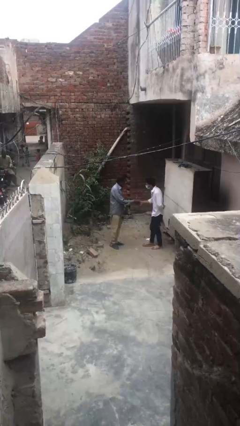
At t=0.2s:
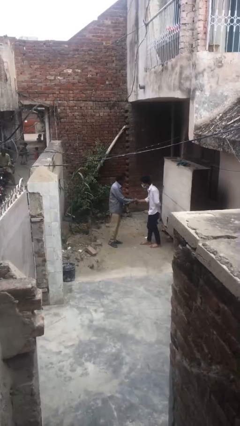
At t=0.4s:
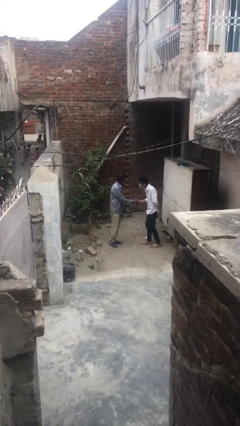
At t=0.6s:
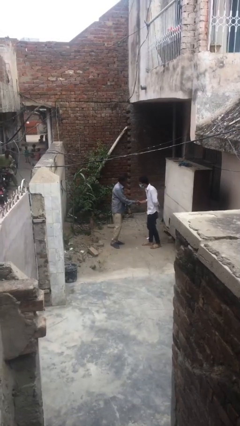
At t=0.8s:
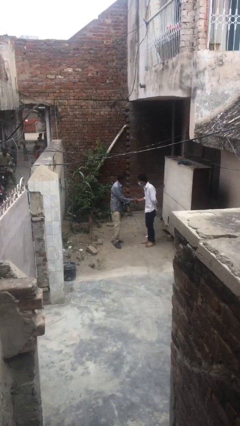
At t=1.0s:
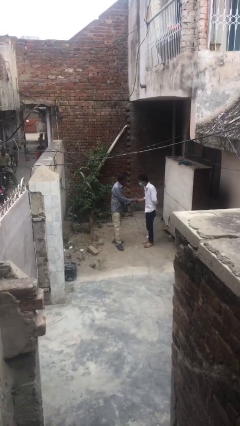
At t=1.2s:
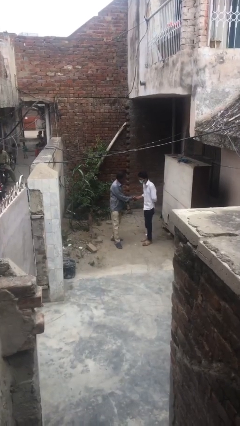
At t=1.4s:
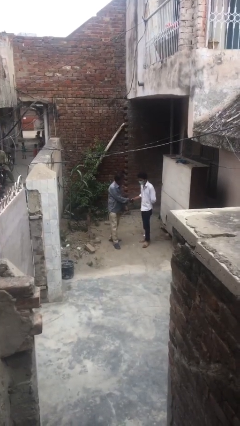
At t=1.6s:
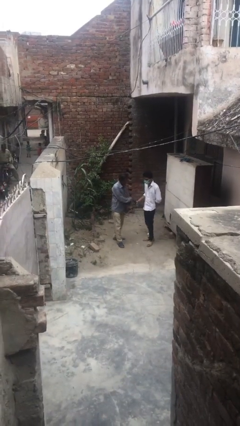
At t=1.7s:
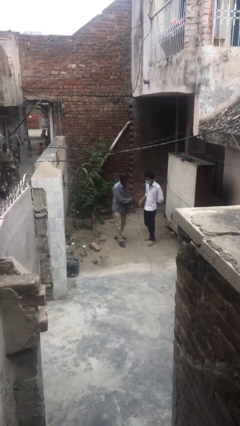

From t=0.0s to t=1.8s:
person shakes hand

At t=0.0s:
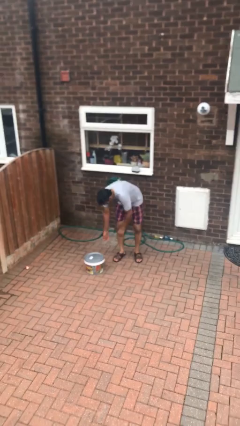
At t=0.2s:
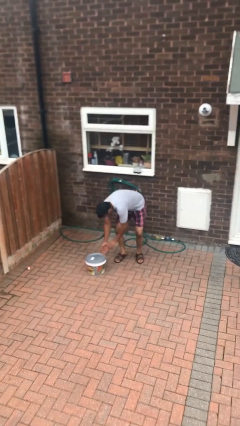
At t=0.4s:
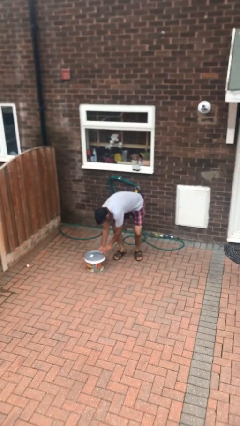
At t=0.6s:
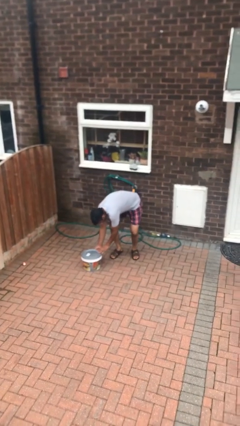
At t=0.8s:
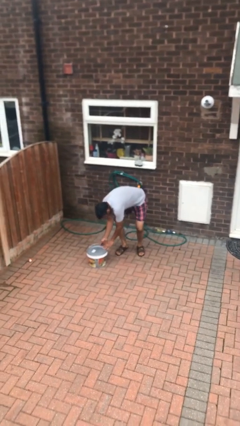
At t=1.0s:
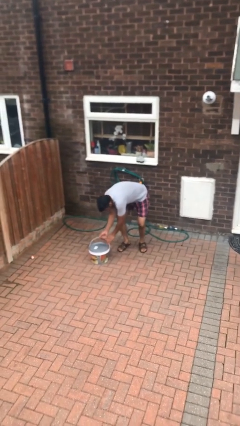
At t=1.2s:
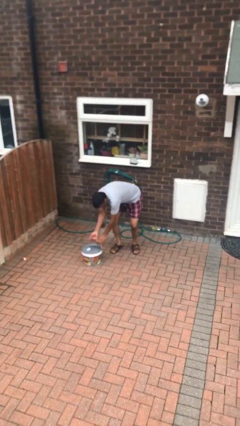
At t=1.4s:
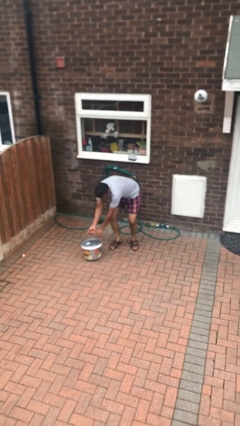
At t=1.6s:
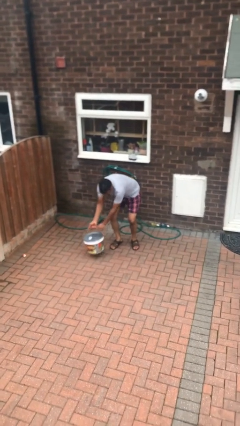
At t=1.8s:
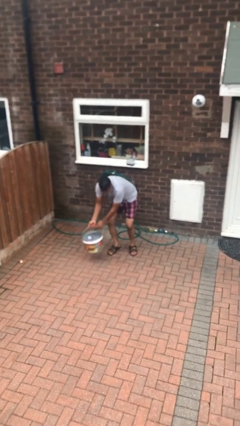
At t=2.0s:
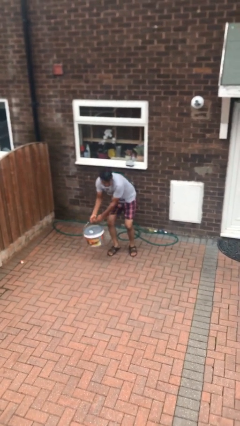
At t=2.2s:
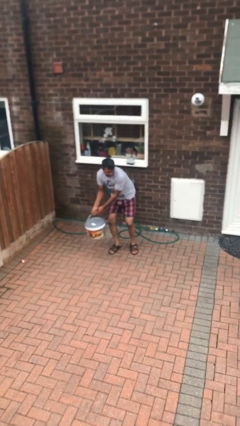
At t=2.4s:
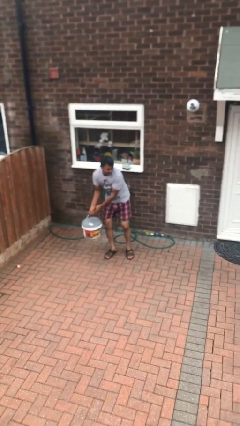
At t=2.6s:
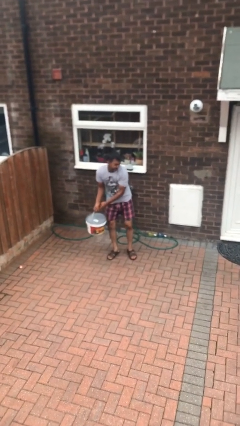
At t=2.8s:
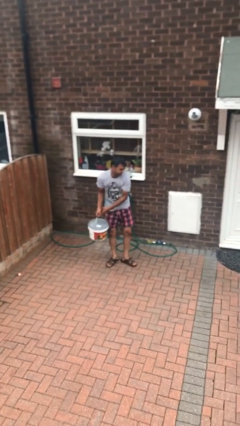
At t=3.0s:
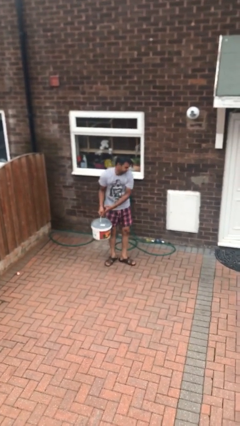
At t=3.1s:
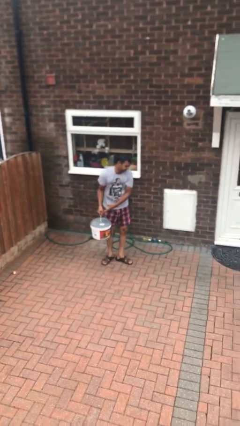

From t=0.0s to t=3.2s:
person picks up object from floor

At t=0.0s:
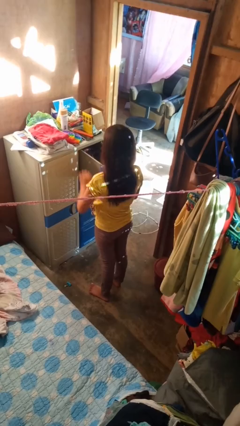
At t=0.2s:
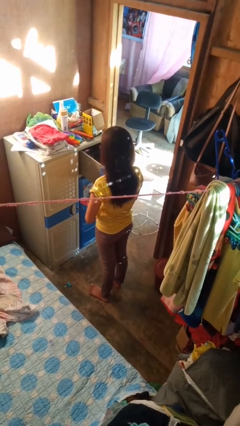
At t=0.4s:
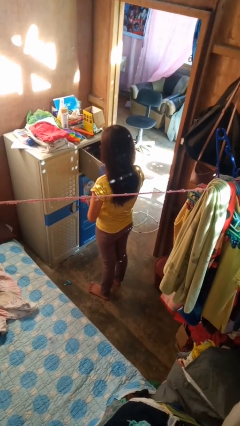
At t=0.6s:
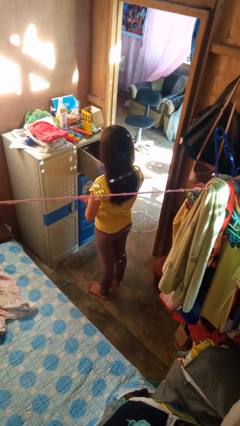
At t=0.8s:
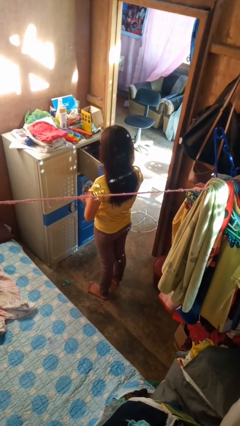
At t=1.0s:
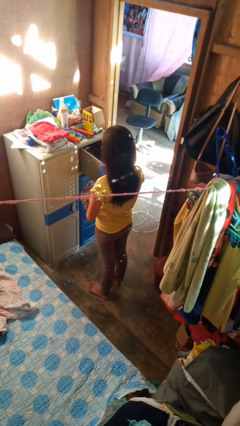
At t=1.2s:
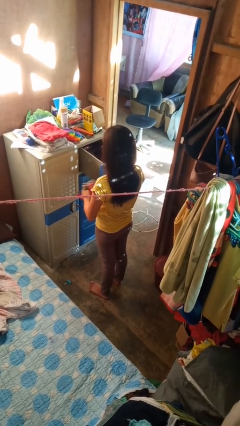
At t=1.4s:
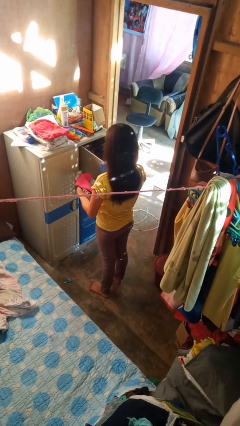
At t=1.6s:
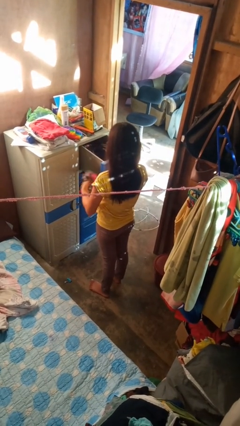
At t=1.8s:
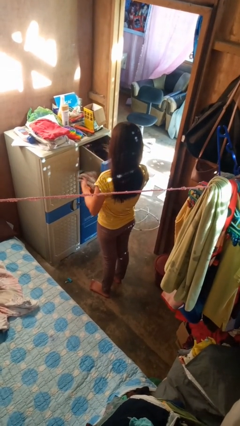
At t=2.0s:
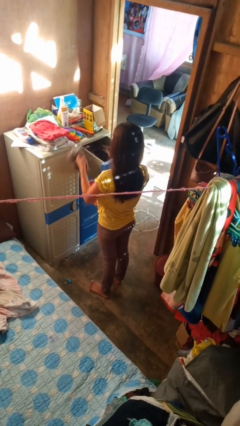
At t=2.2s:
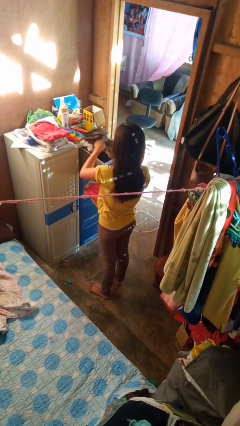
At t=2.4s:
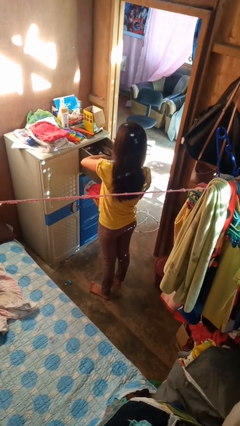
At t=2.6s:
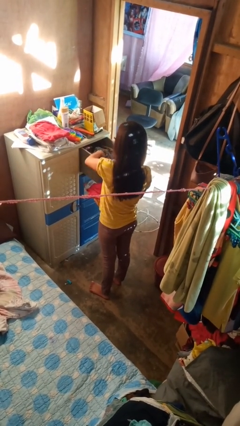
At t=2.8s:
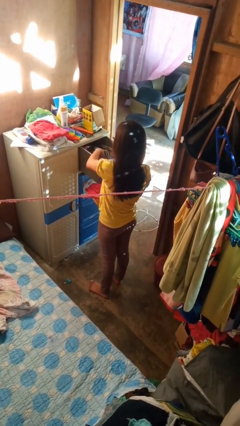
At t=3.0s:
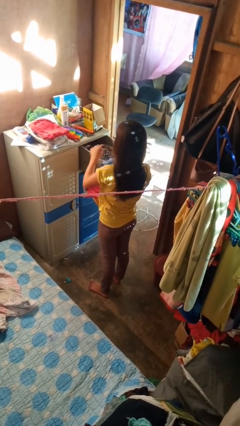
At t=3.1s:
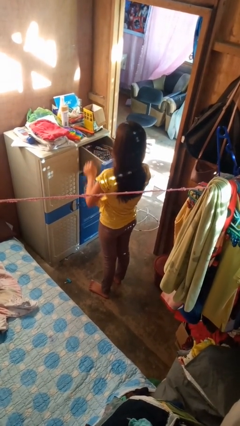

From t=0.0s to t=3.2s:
person puts clothes into dresser

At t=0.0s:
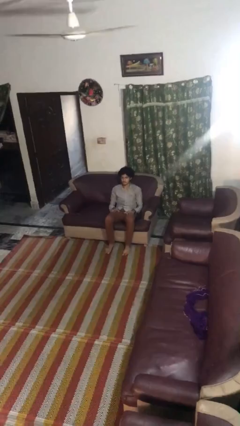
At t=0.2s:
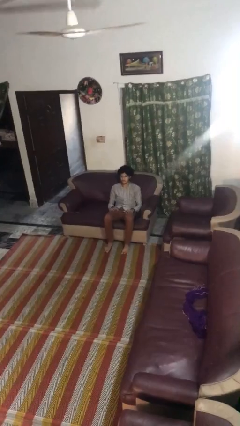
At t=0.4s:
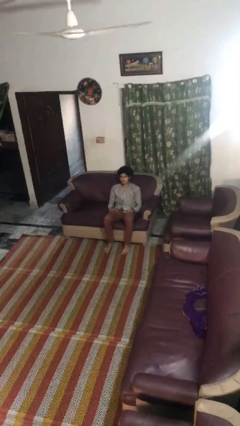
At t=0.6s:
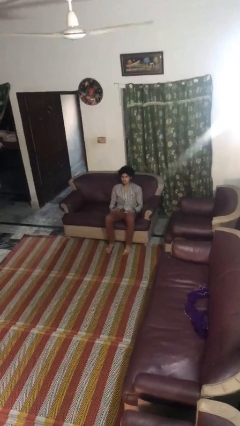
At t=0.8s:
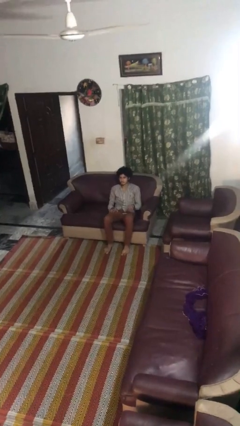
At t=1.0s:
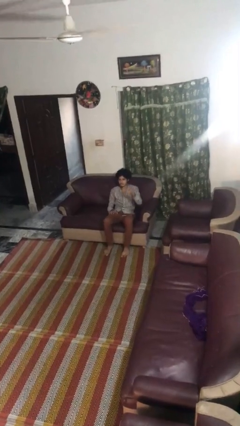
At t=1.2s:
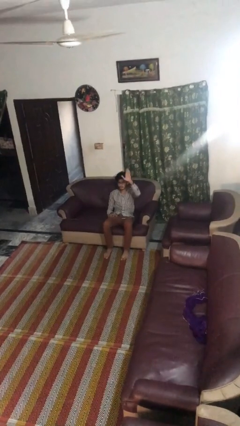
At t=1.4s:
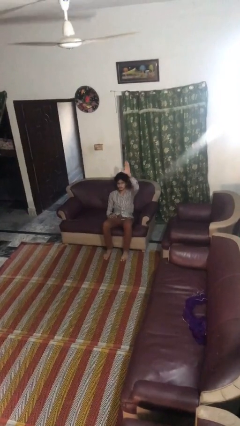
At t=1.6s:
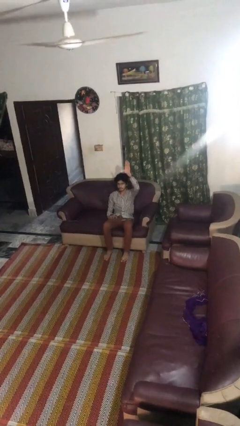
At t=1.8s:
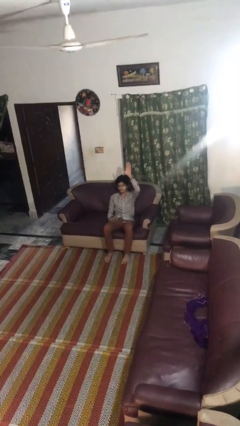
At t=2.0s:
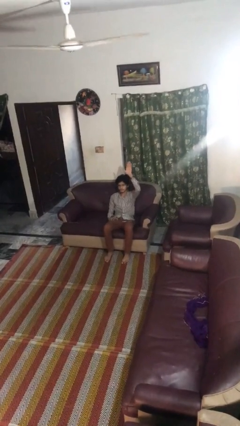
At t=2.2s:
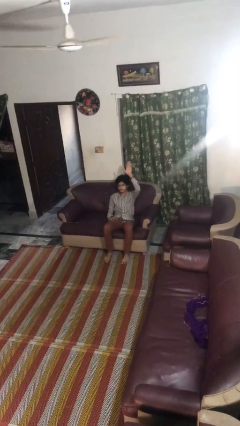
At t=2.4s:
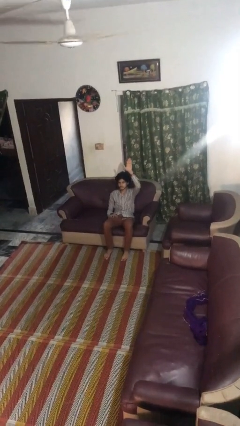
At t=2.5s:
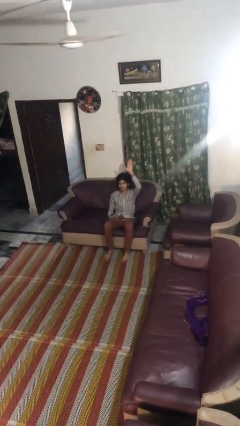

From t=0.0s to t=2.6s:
person gestures raise hand

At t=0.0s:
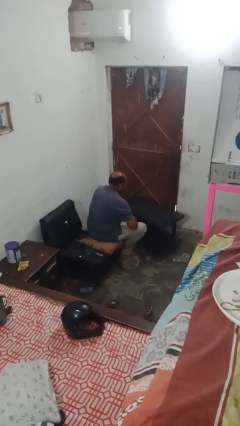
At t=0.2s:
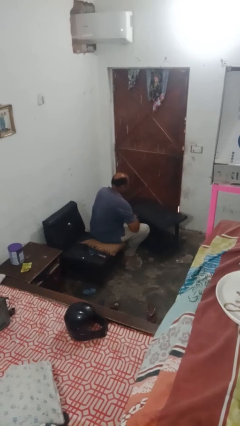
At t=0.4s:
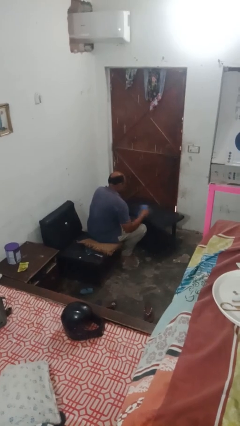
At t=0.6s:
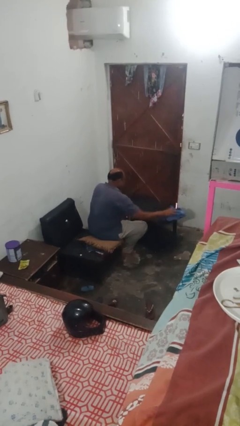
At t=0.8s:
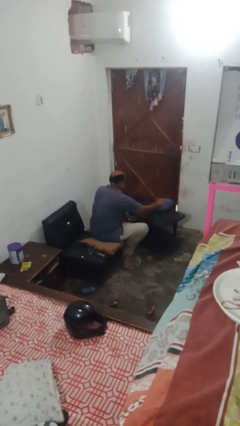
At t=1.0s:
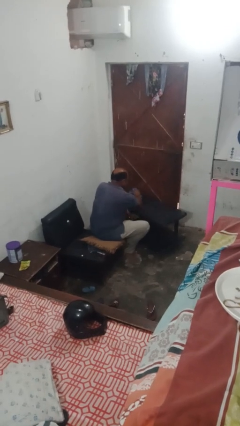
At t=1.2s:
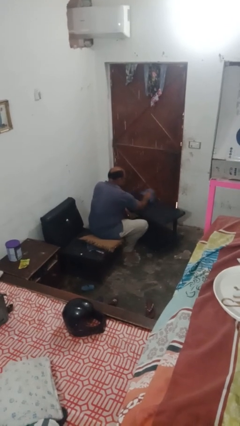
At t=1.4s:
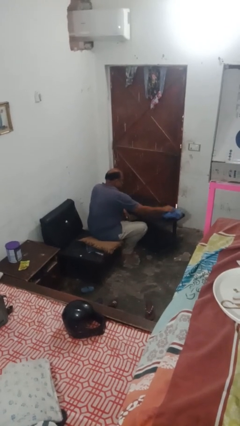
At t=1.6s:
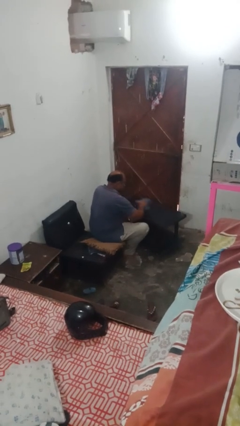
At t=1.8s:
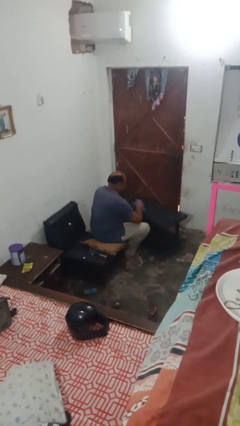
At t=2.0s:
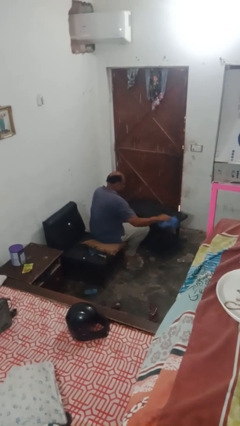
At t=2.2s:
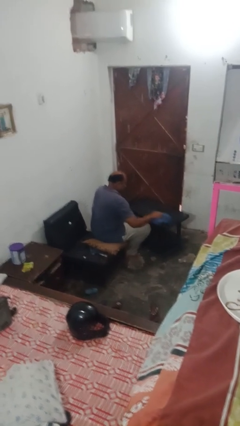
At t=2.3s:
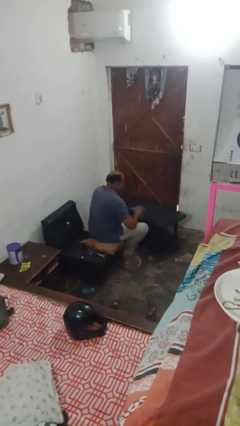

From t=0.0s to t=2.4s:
person cleans table with rag

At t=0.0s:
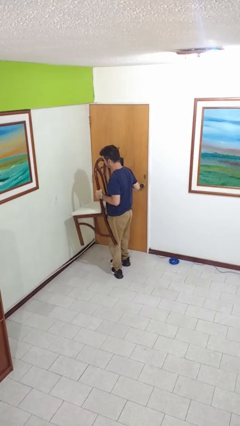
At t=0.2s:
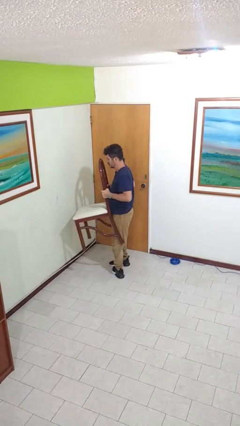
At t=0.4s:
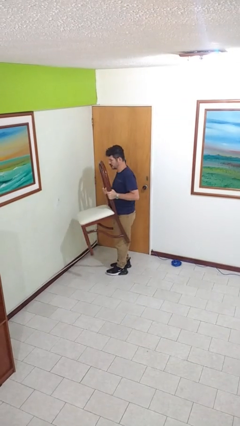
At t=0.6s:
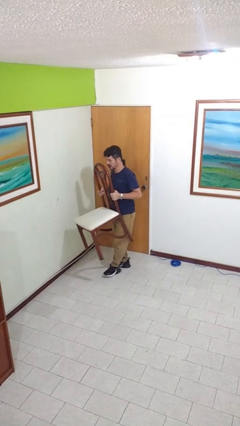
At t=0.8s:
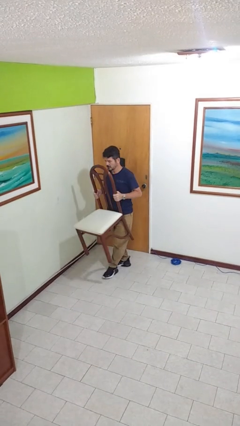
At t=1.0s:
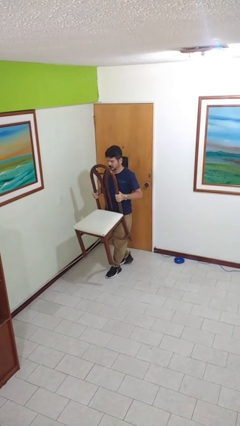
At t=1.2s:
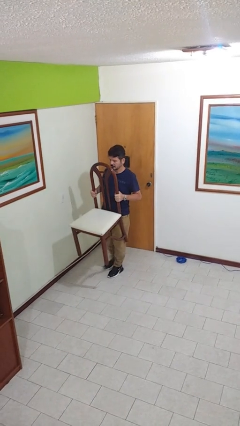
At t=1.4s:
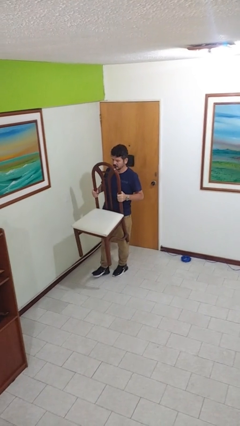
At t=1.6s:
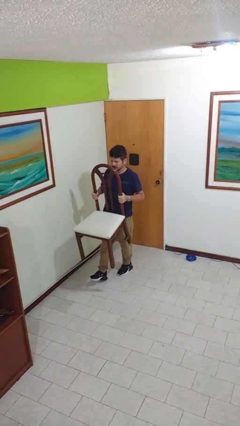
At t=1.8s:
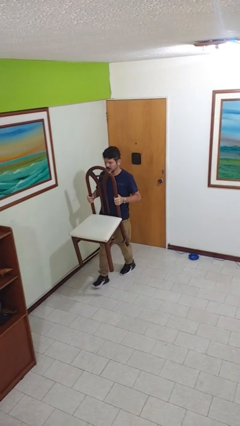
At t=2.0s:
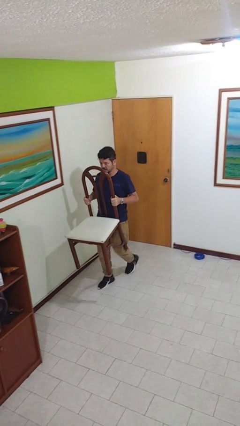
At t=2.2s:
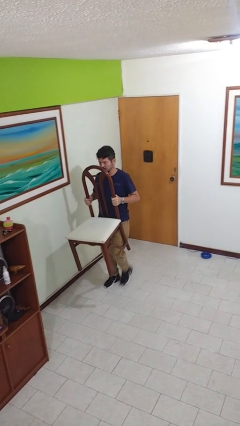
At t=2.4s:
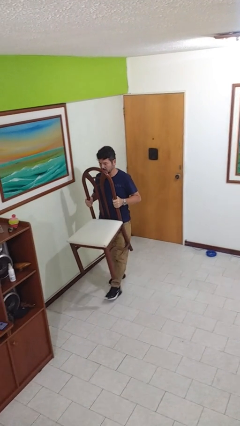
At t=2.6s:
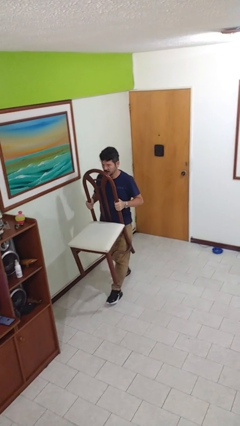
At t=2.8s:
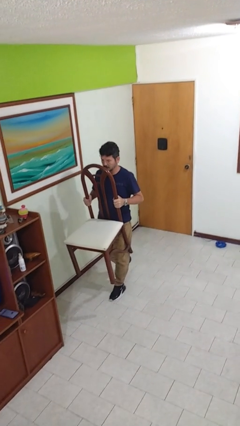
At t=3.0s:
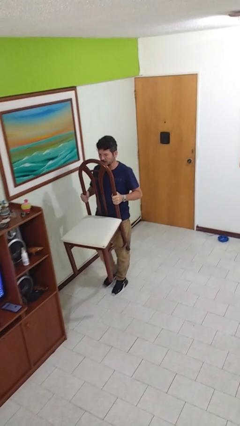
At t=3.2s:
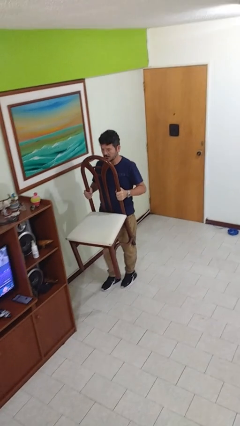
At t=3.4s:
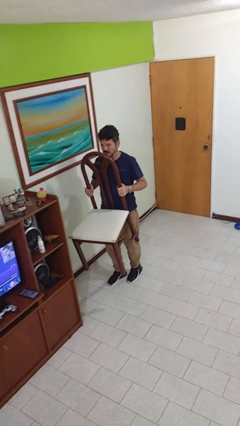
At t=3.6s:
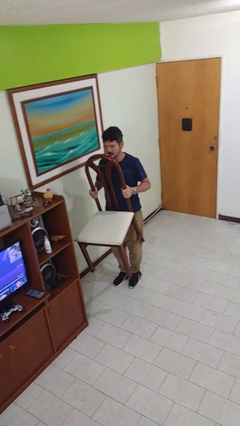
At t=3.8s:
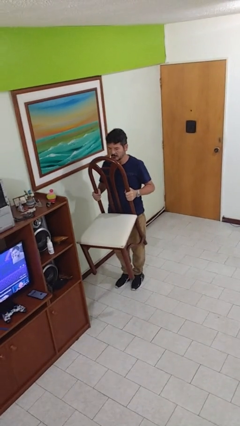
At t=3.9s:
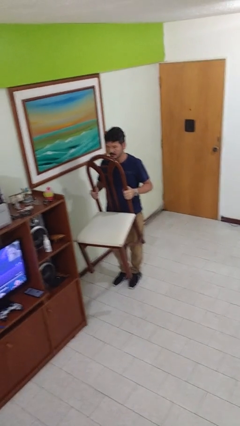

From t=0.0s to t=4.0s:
person carries furniture
